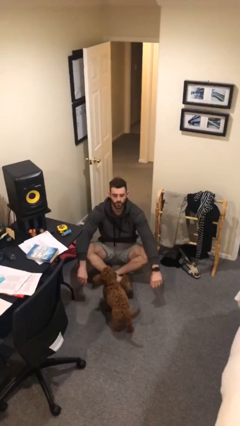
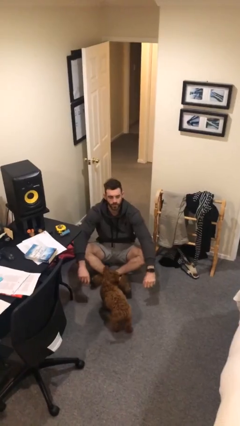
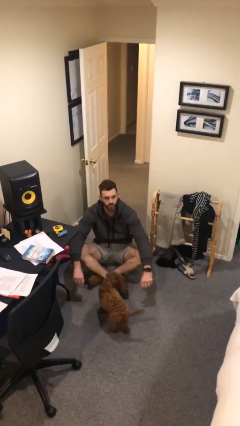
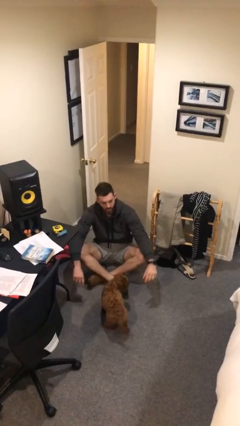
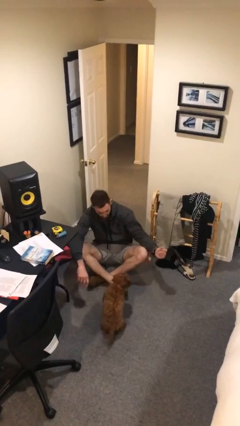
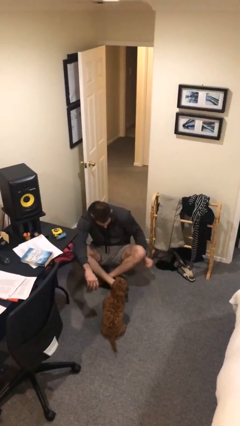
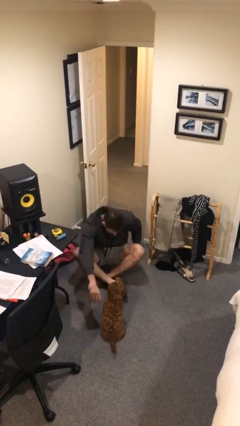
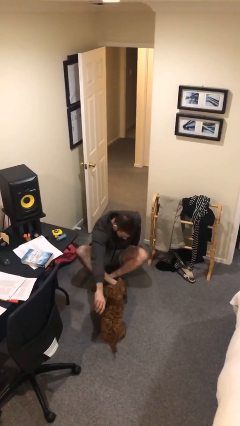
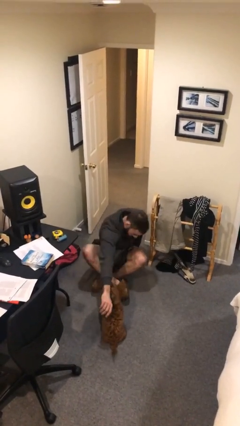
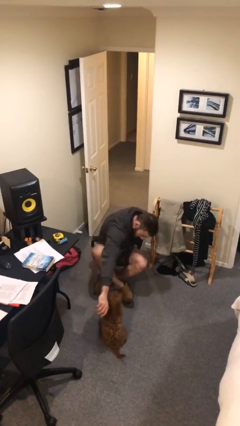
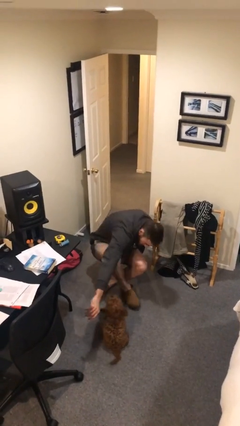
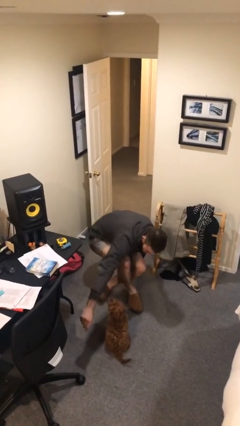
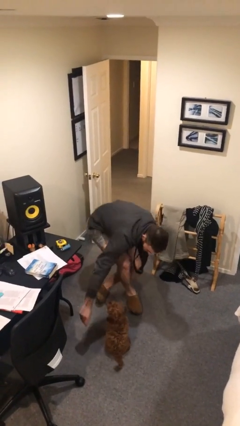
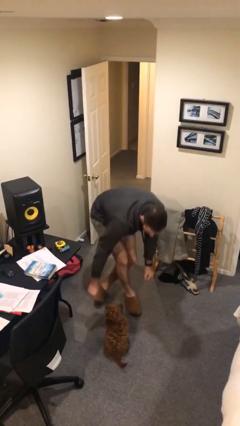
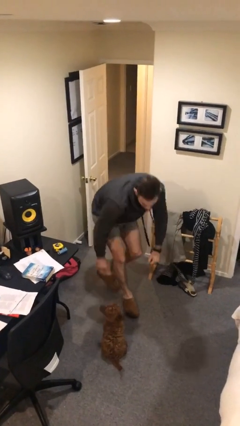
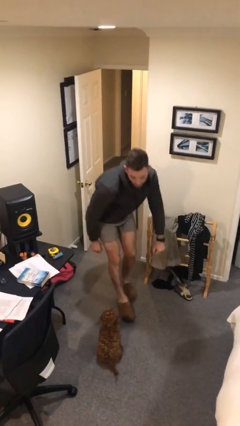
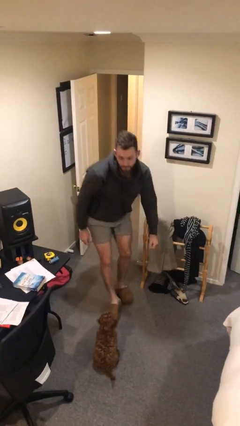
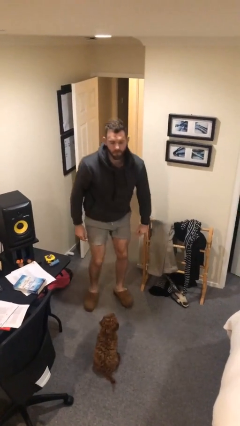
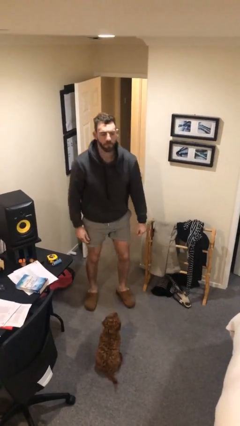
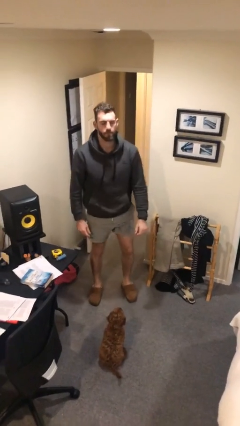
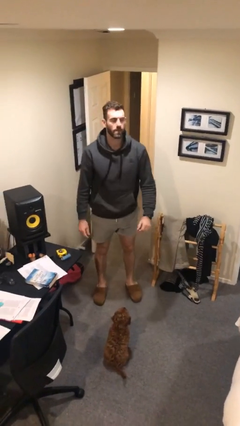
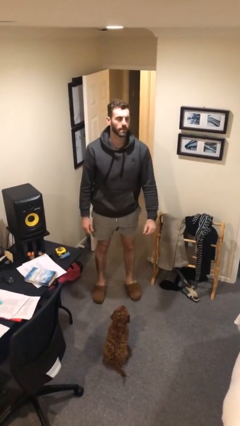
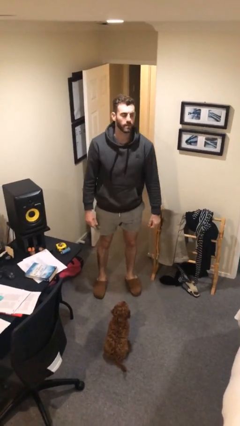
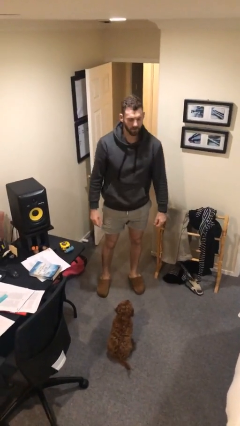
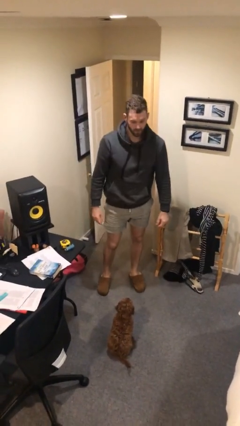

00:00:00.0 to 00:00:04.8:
person stands up from floor

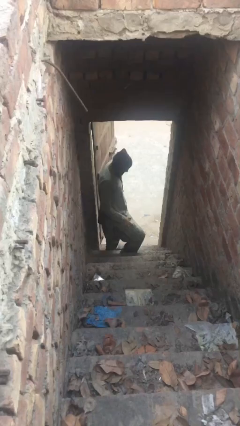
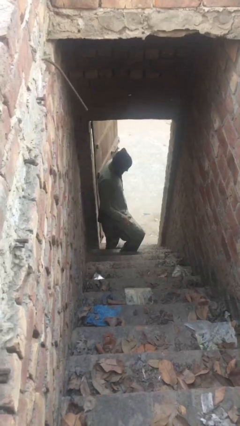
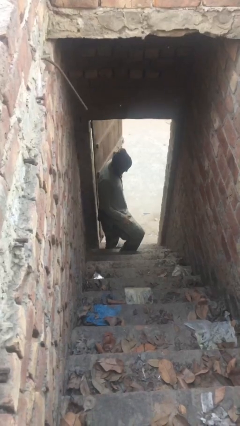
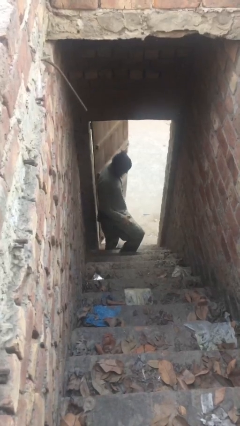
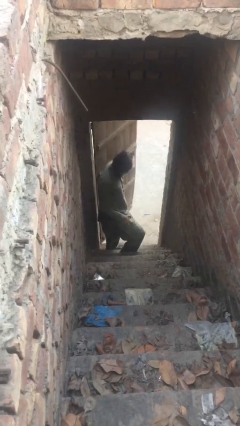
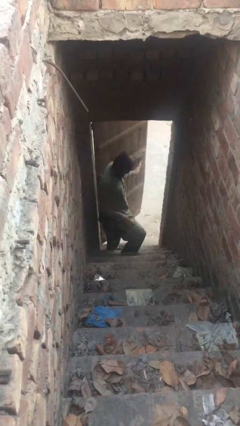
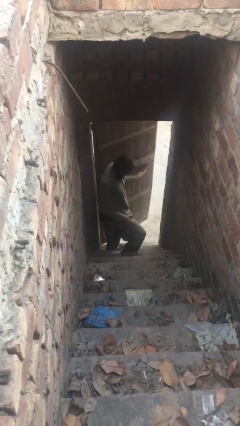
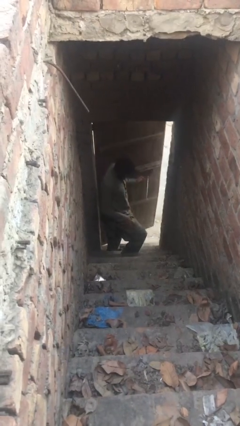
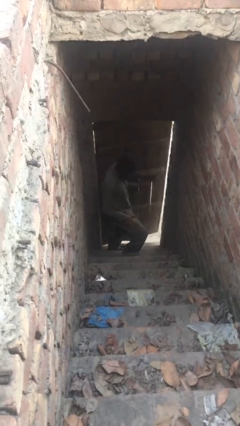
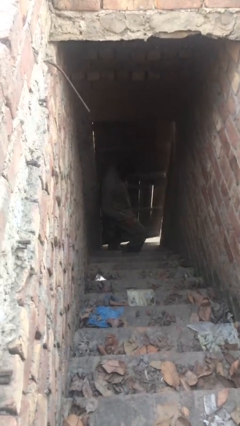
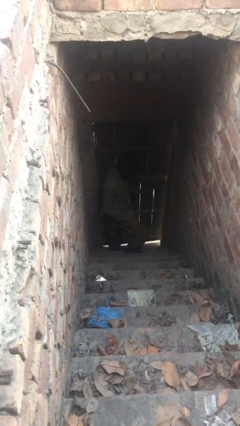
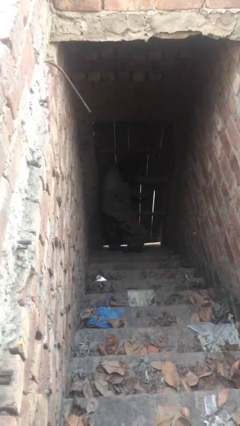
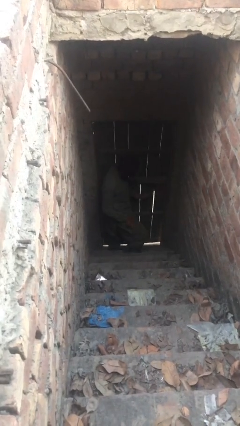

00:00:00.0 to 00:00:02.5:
person closes facility door

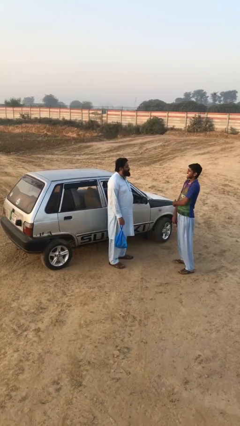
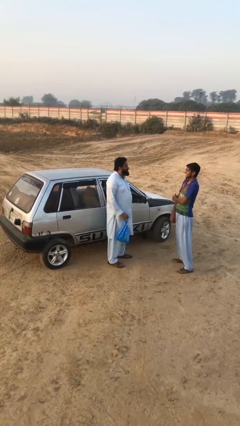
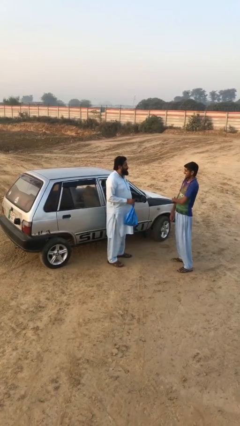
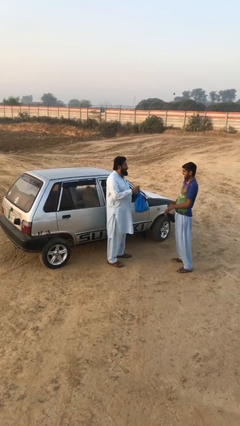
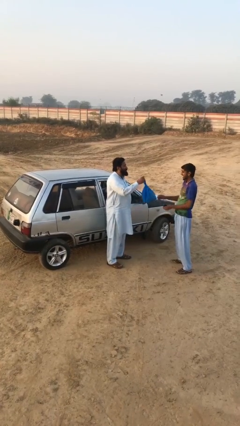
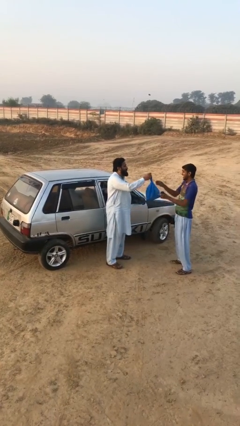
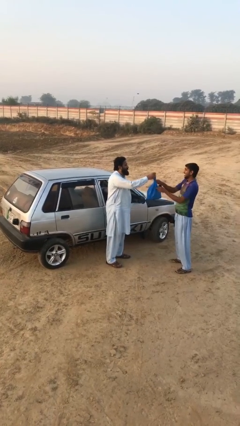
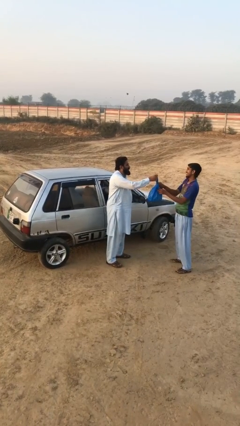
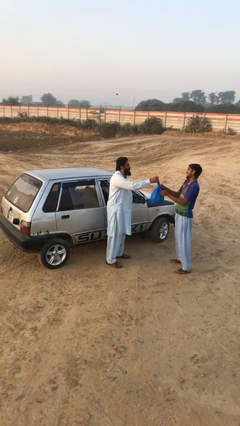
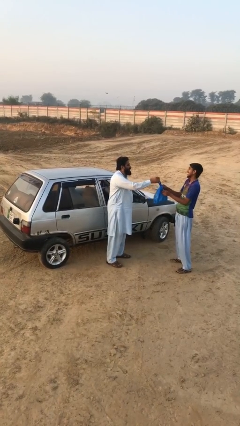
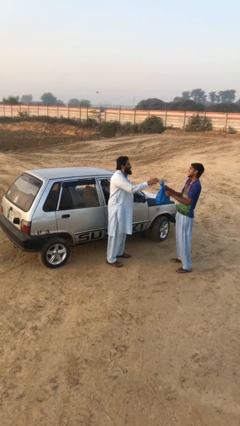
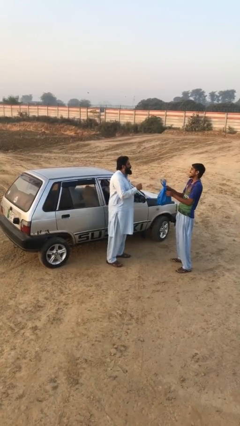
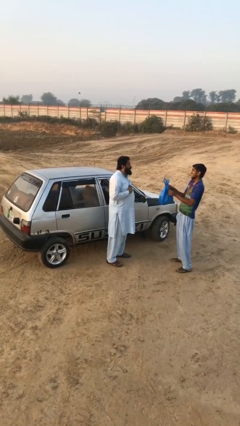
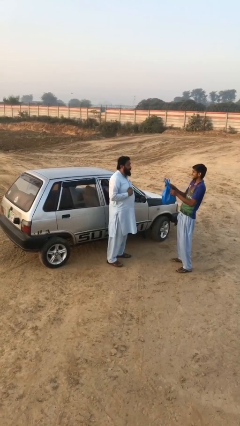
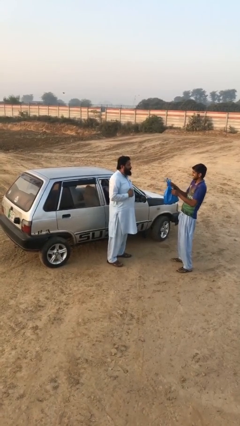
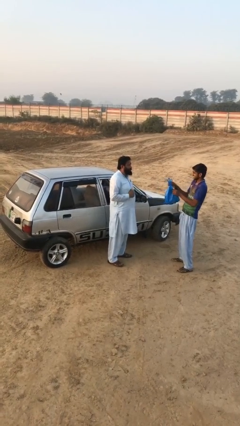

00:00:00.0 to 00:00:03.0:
person transfers object to person

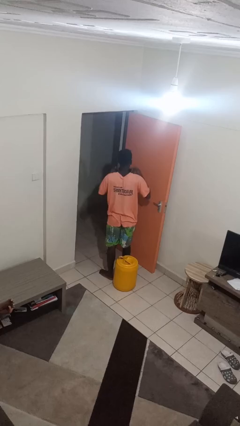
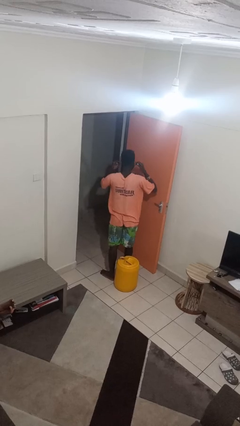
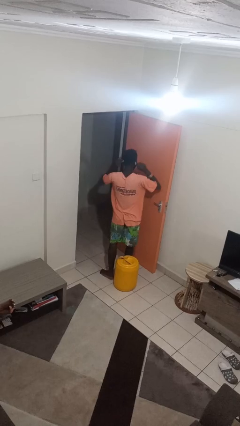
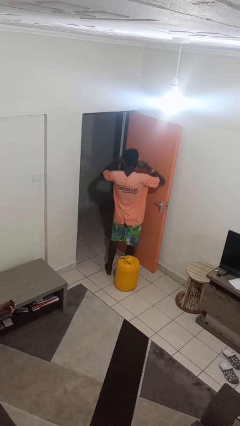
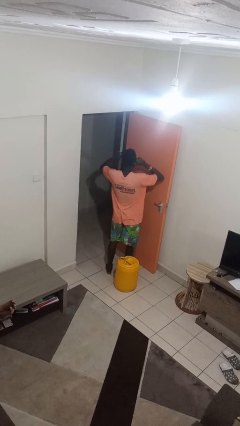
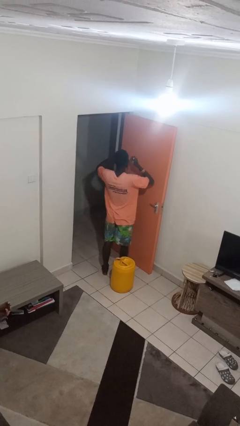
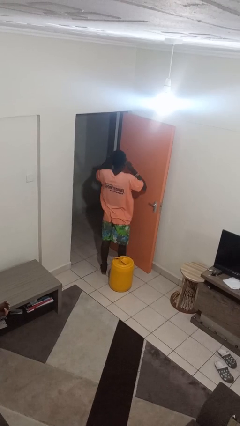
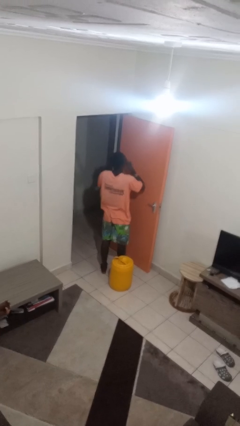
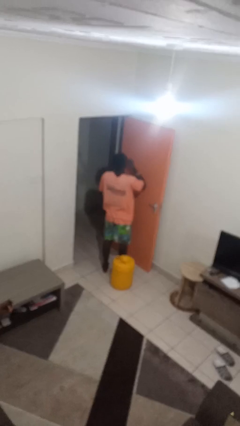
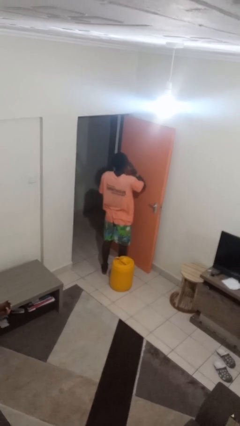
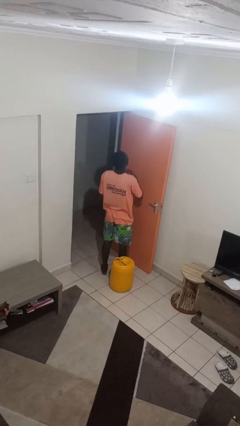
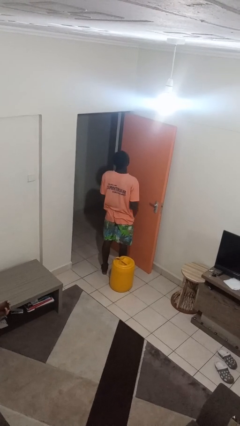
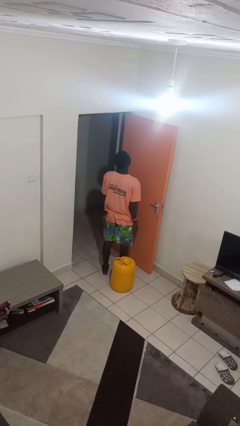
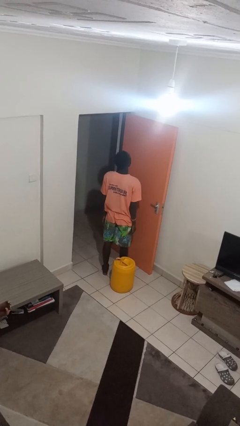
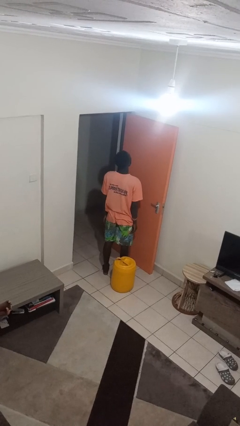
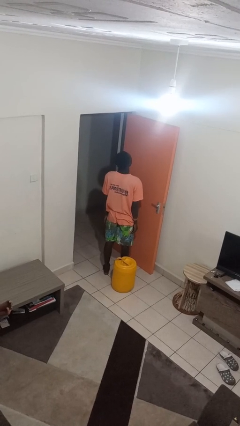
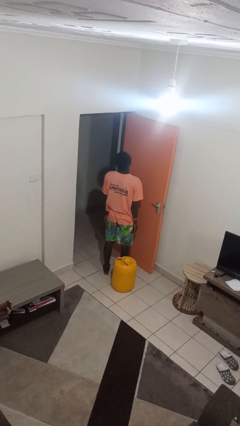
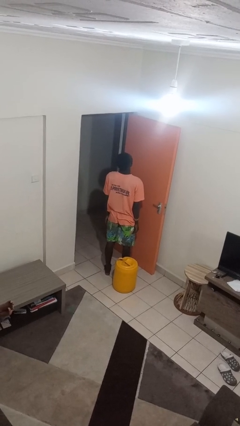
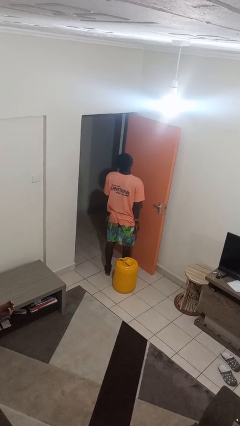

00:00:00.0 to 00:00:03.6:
person puts on facemask

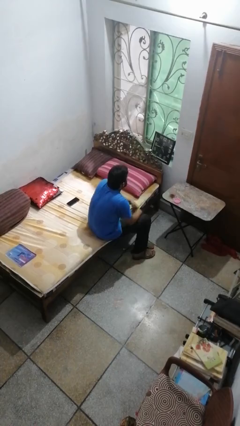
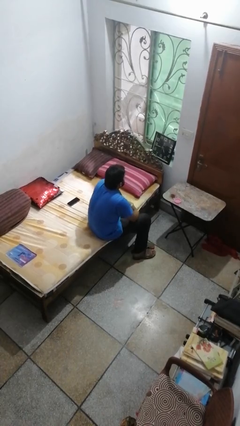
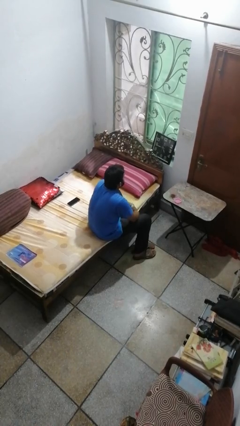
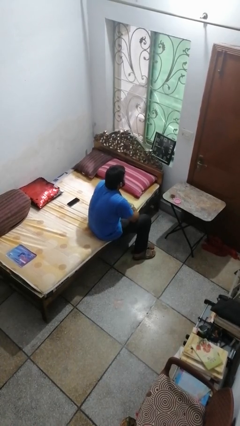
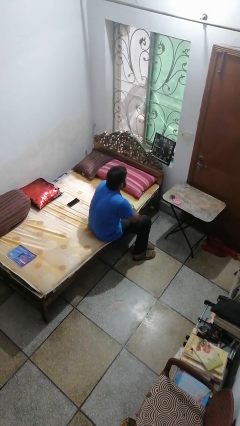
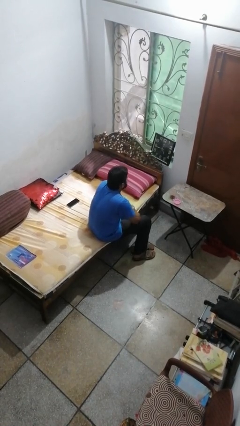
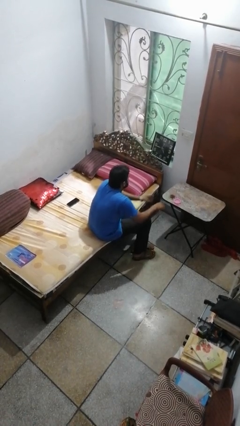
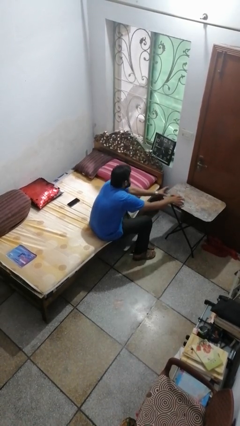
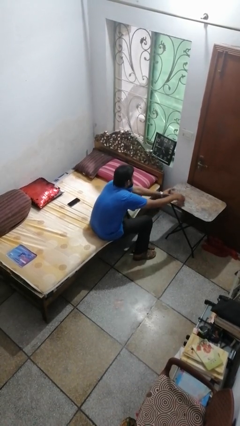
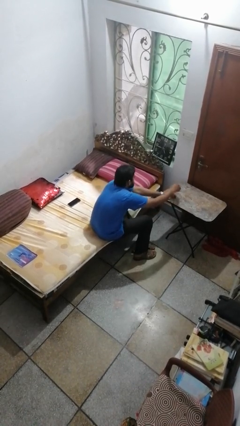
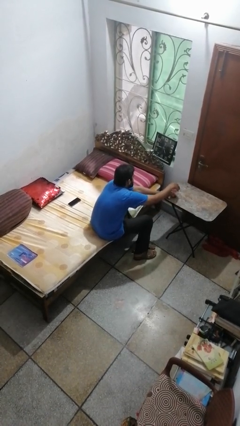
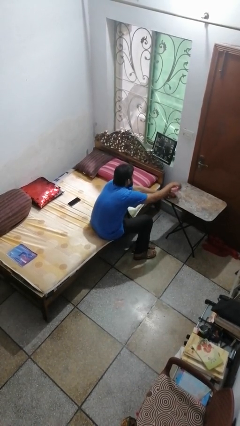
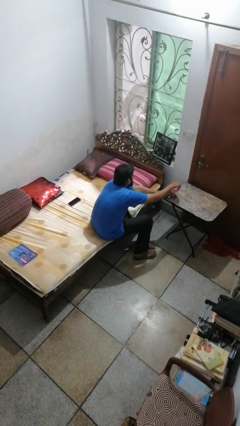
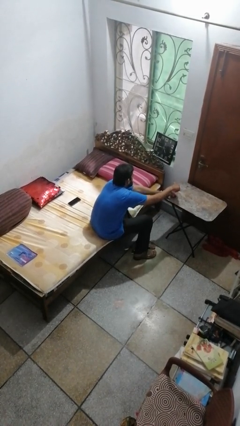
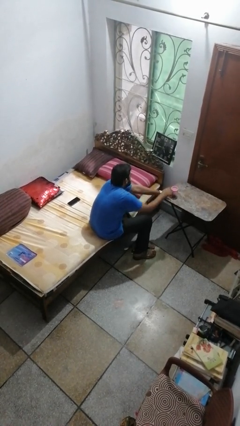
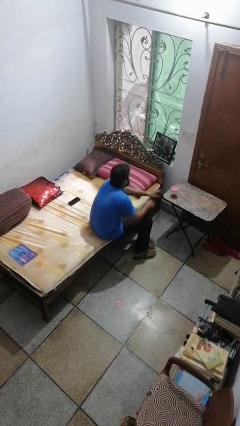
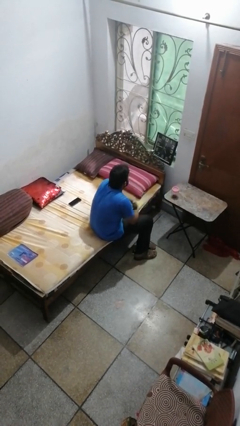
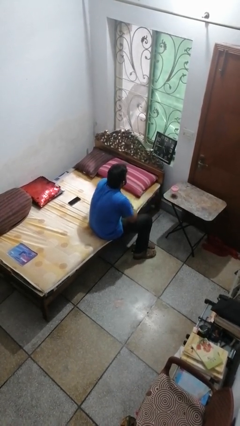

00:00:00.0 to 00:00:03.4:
person closes jar

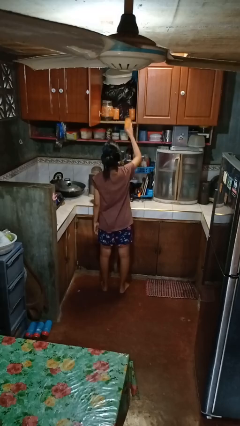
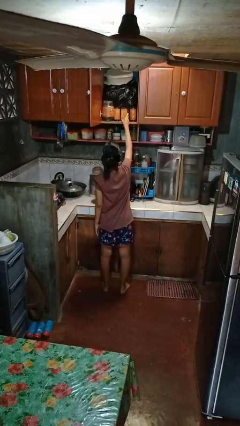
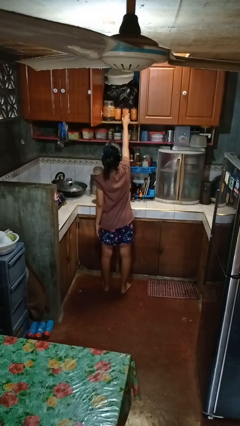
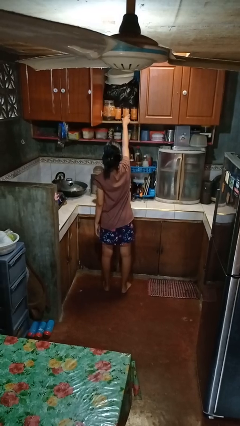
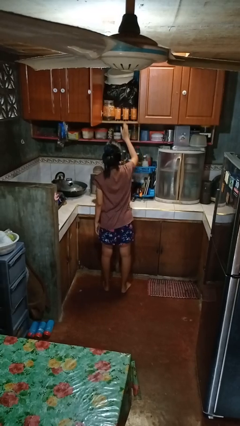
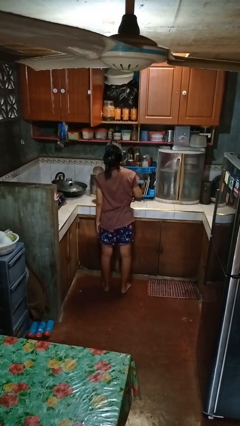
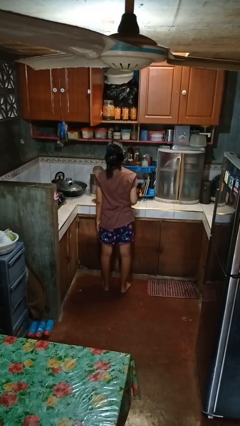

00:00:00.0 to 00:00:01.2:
person puts object in cabinet
